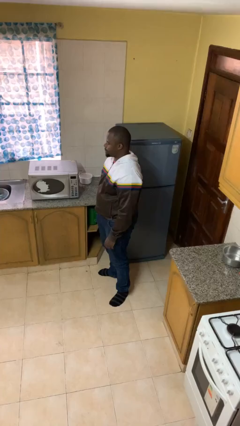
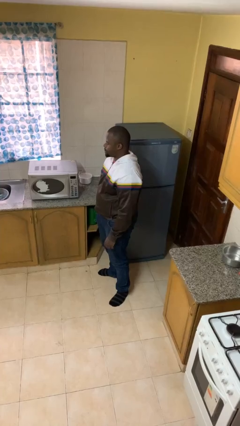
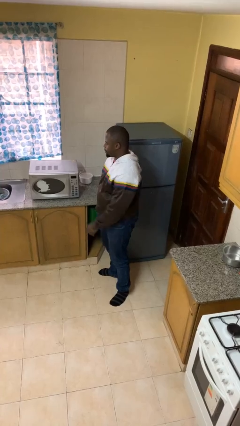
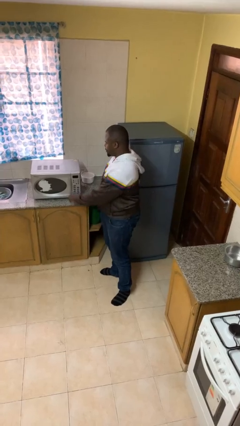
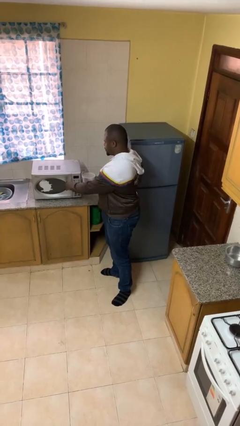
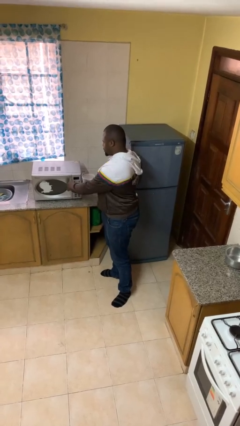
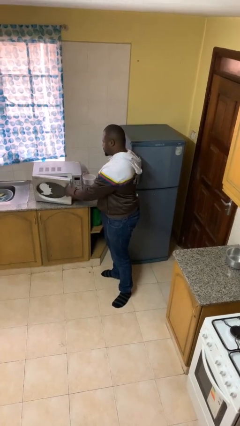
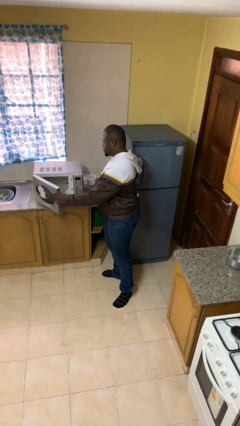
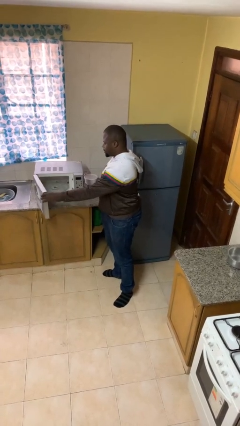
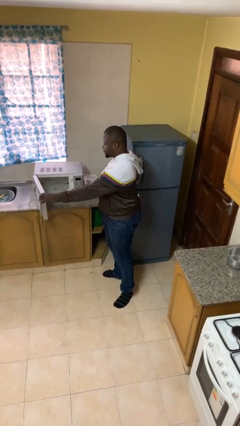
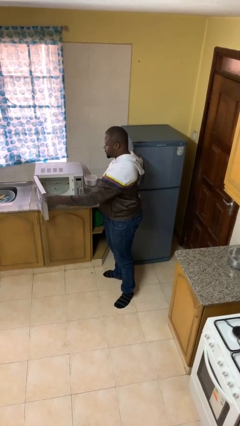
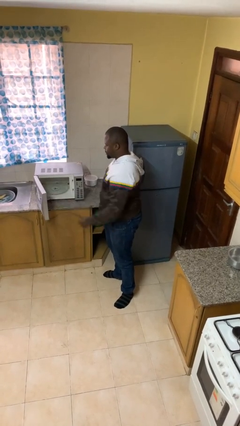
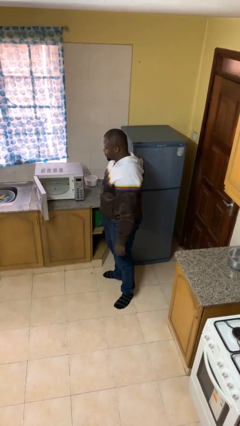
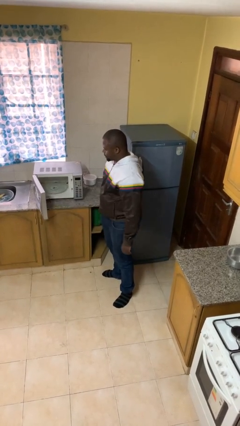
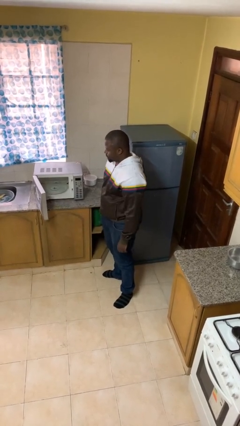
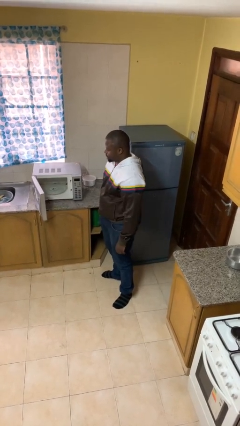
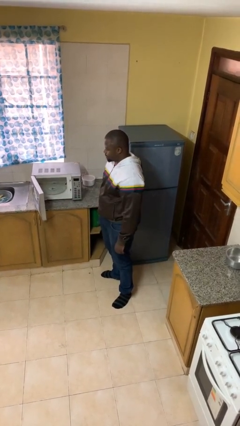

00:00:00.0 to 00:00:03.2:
person opens microwave

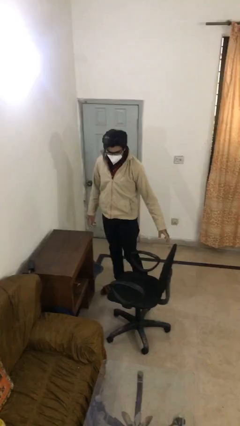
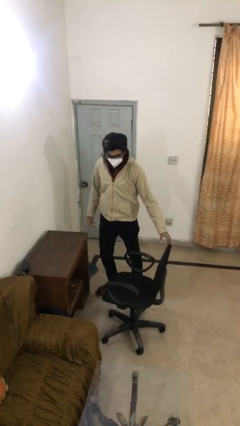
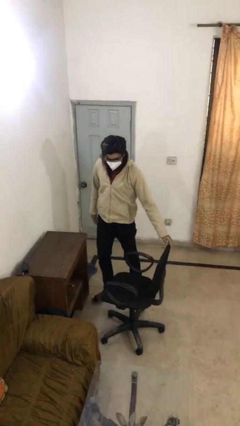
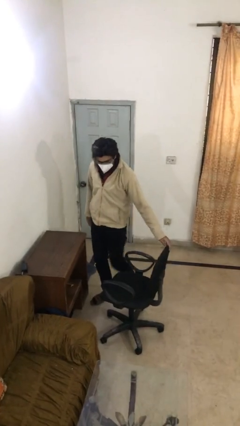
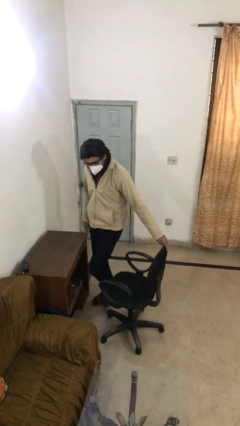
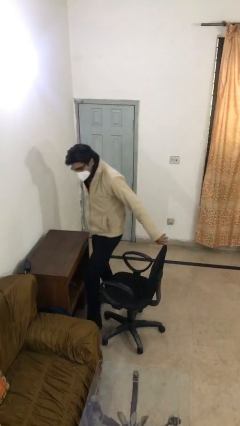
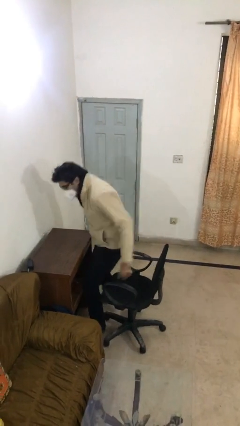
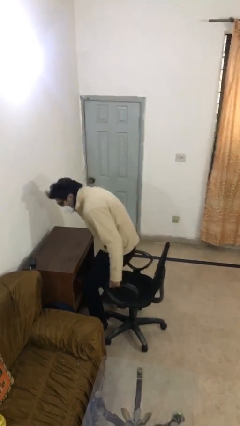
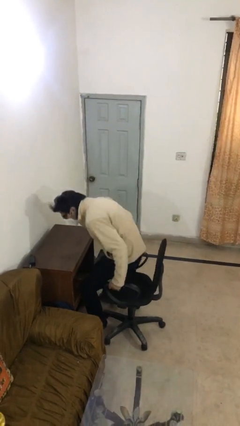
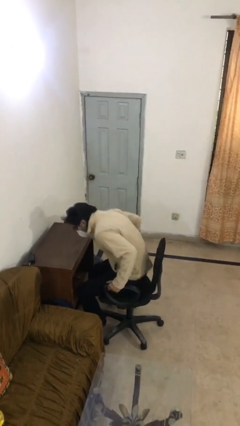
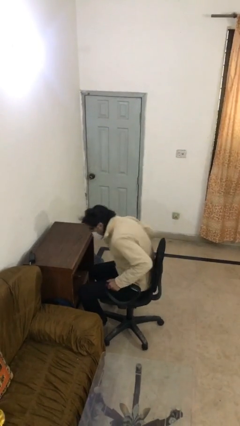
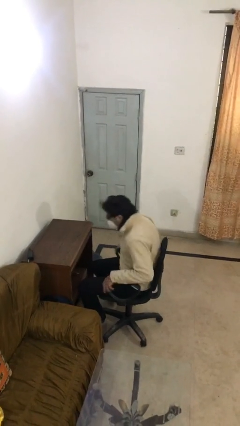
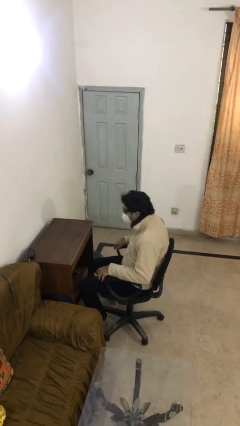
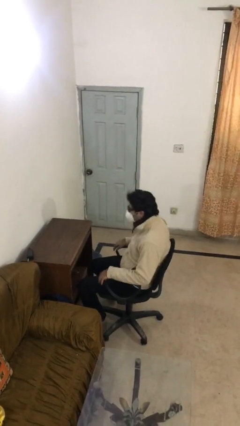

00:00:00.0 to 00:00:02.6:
person sits down

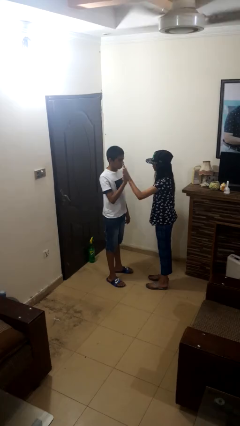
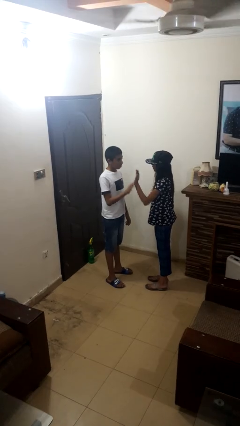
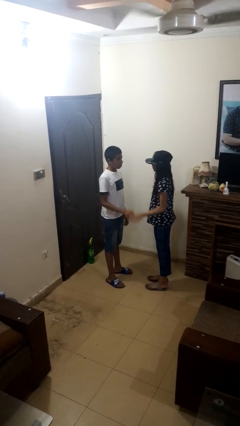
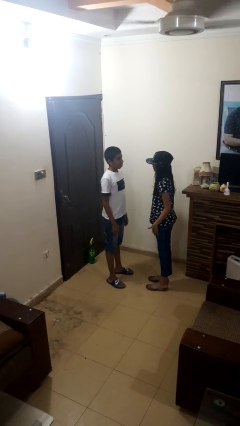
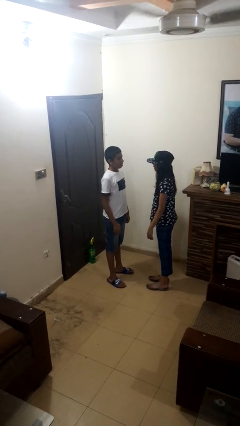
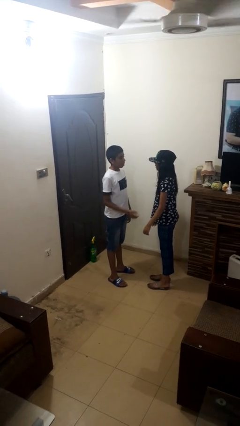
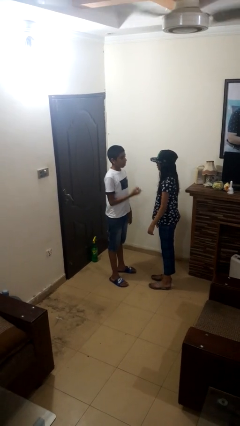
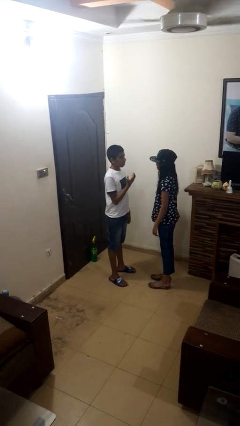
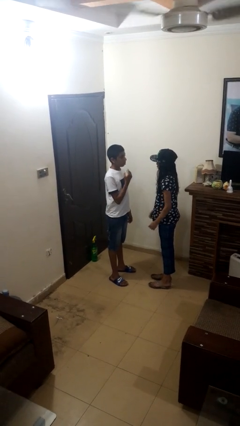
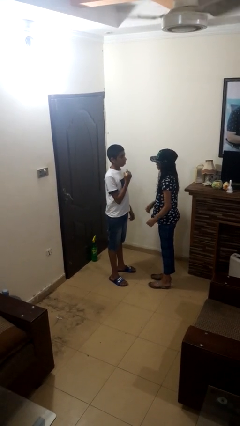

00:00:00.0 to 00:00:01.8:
person highfives hand

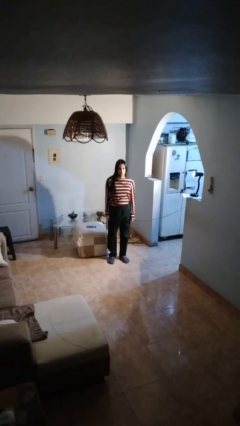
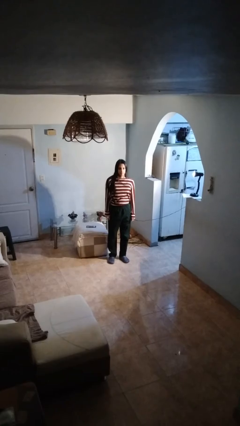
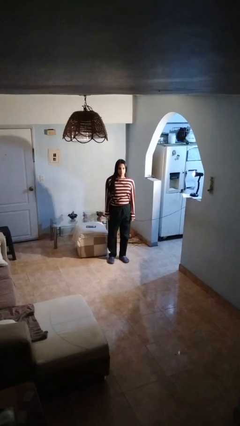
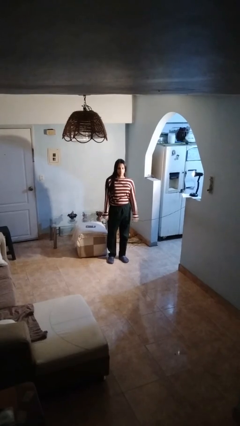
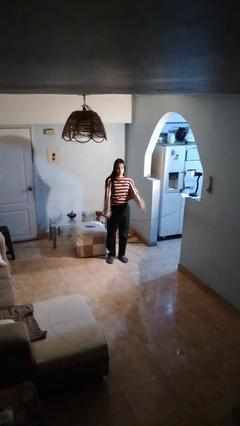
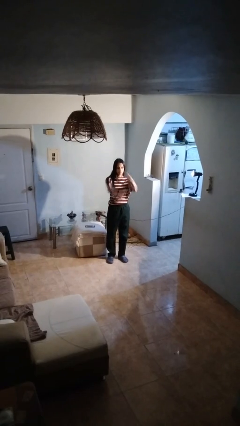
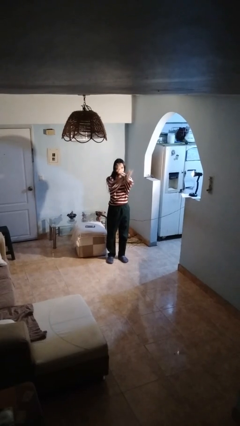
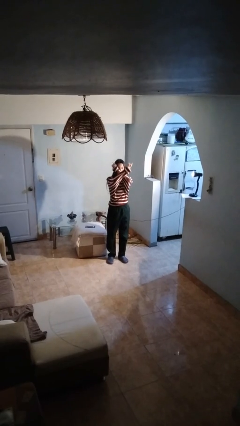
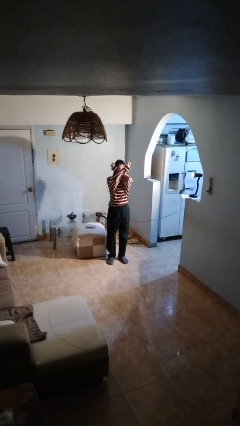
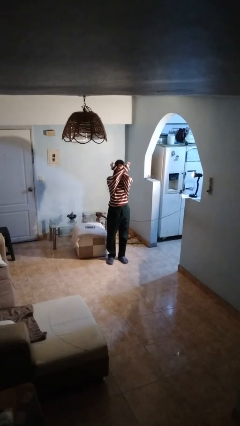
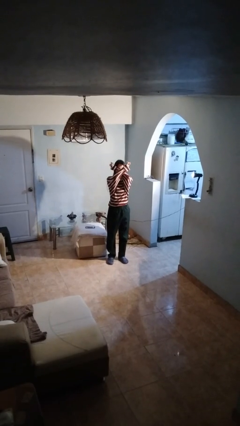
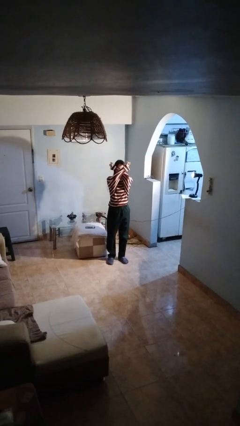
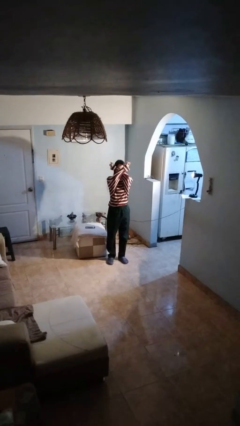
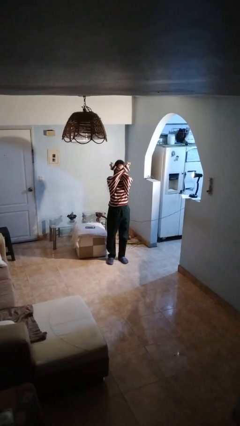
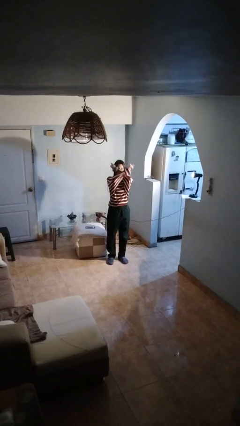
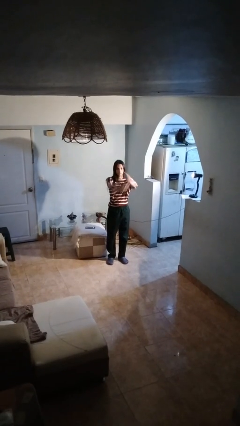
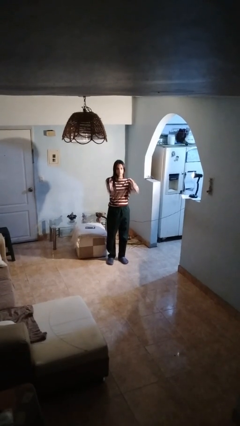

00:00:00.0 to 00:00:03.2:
person gestures arms x

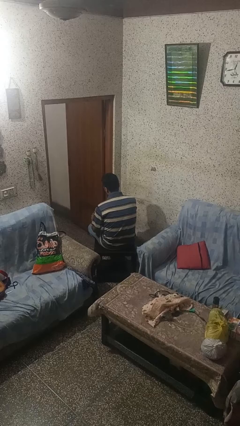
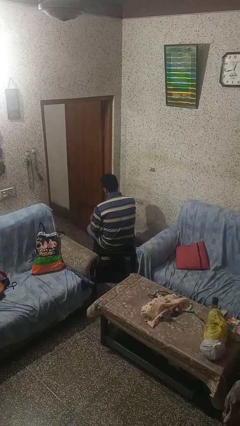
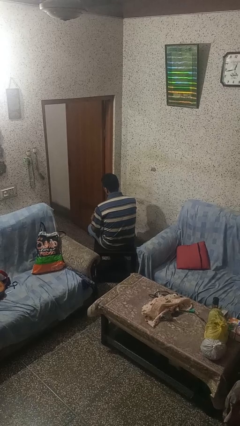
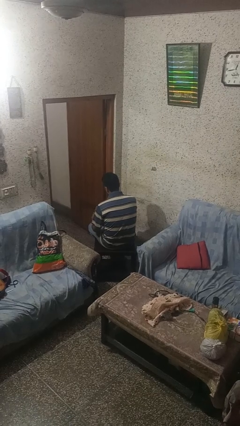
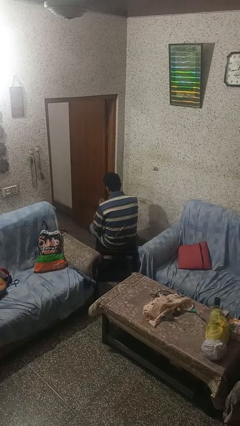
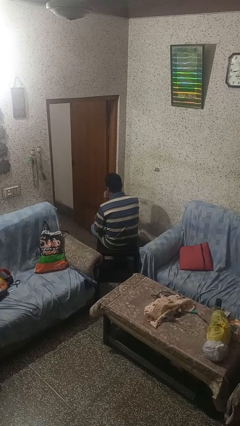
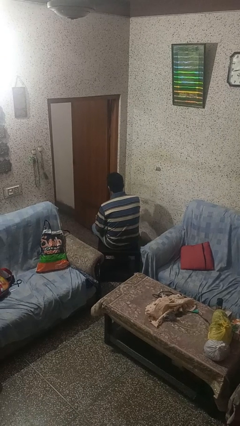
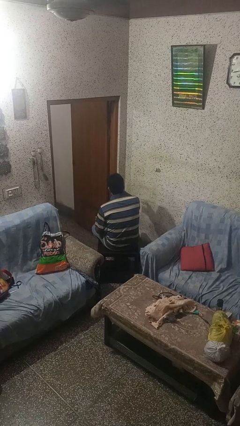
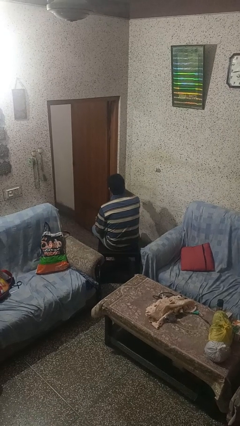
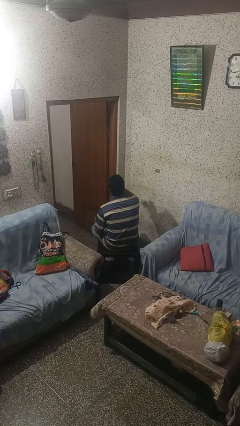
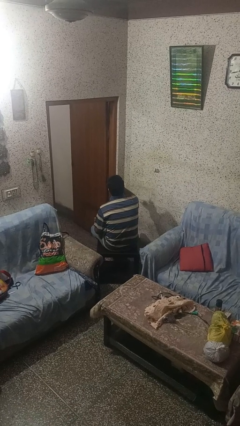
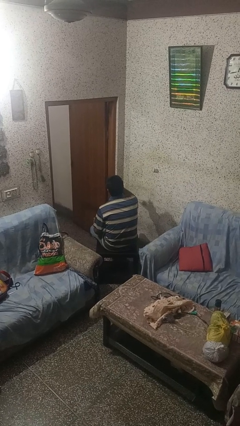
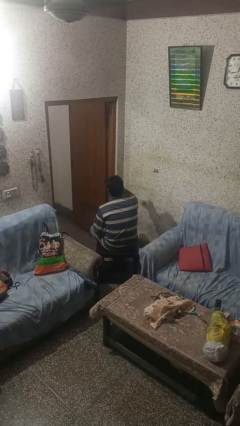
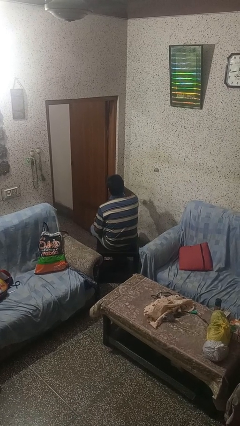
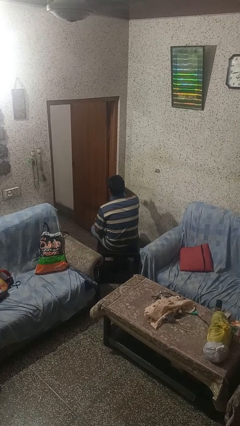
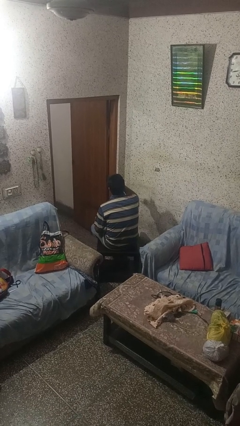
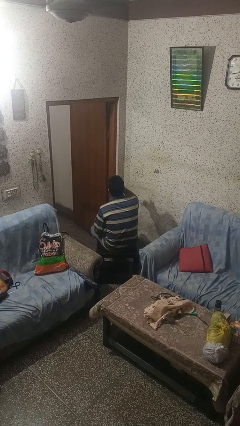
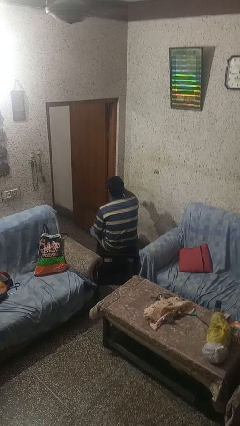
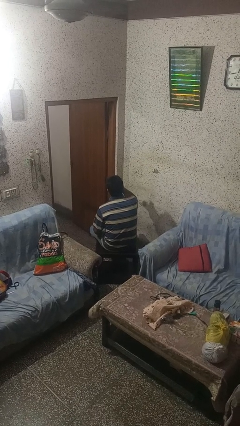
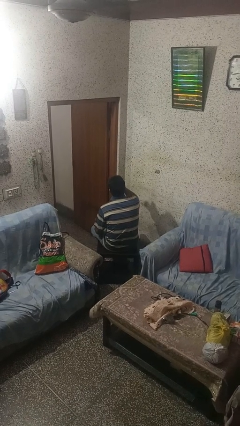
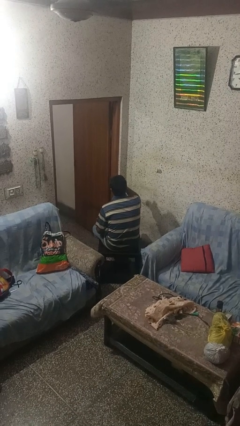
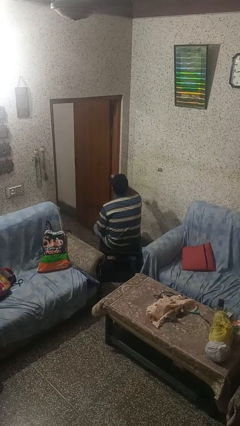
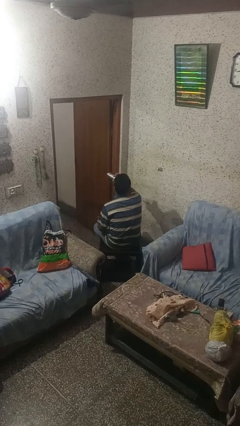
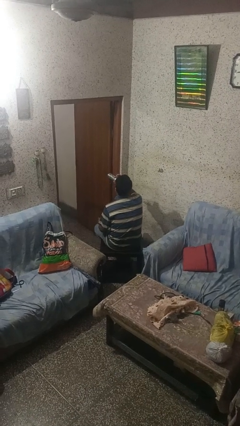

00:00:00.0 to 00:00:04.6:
person drinks from beverage can

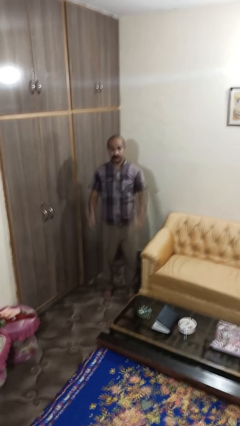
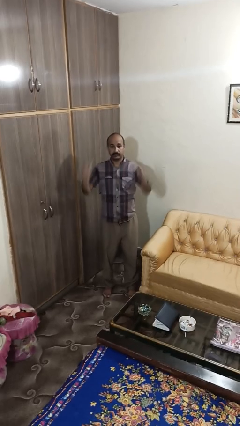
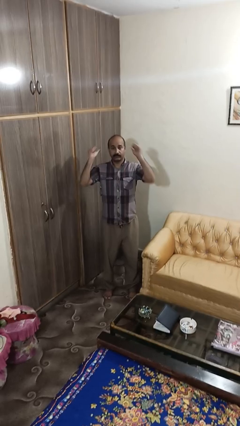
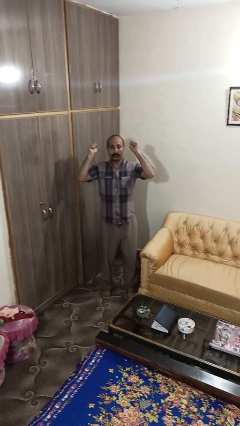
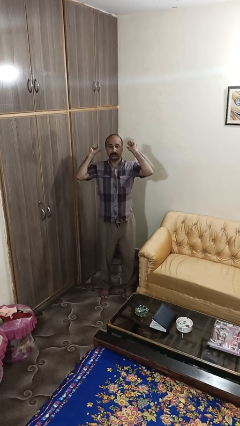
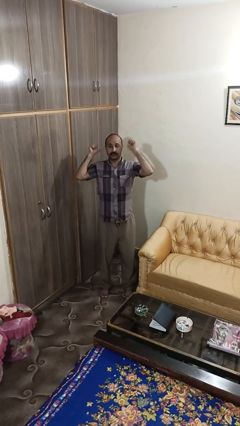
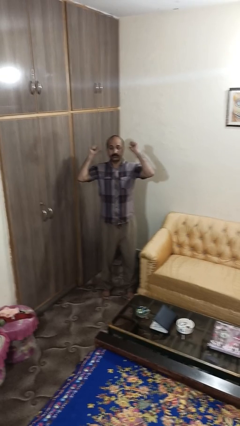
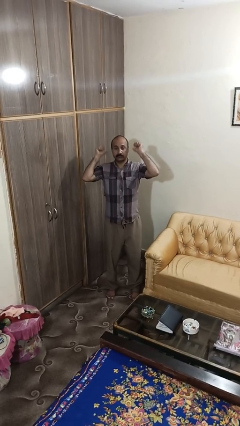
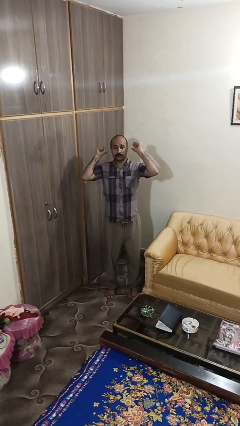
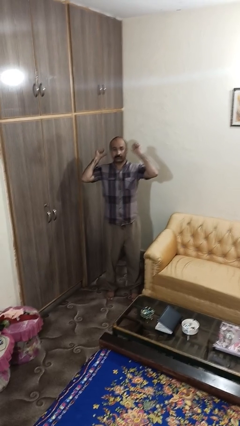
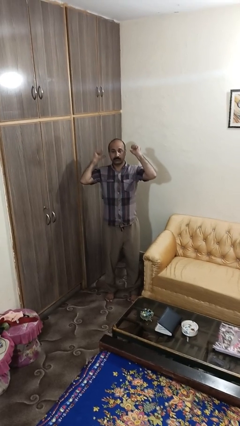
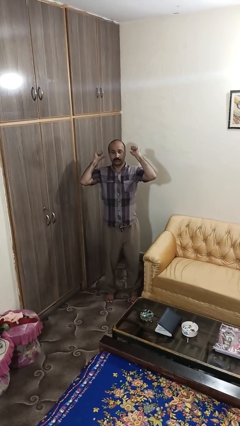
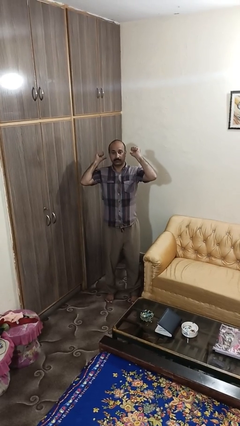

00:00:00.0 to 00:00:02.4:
person gestures behind me
